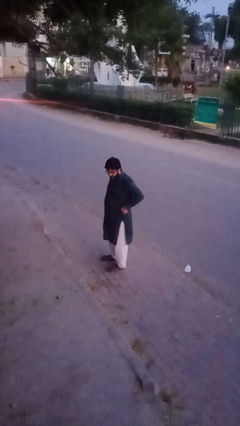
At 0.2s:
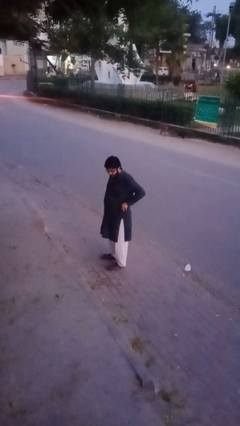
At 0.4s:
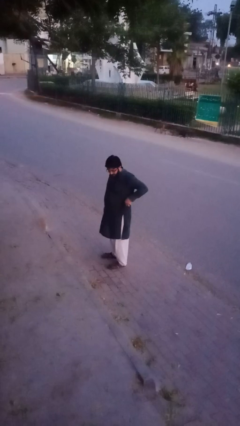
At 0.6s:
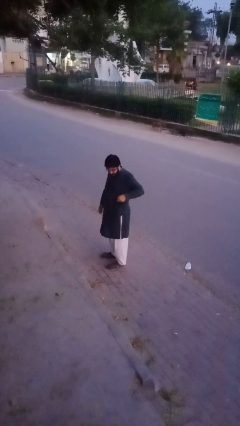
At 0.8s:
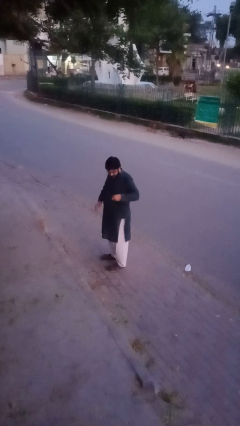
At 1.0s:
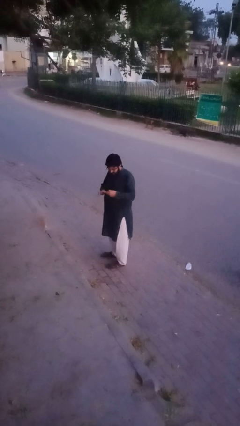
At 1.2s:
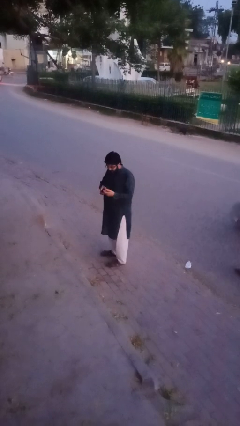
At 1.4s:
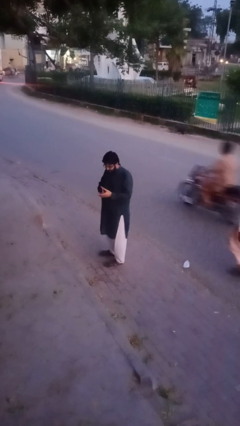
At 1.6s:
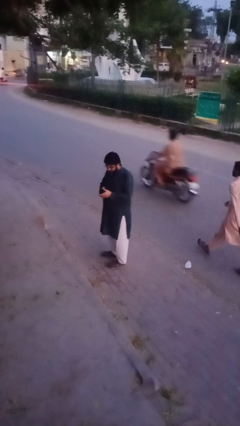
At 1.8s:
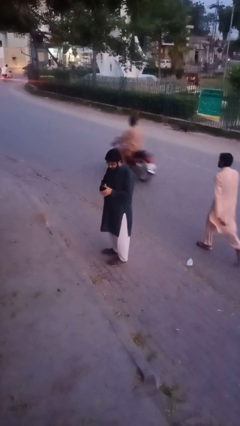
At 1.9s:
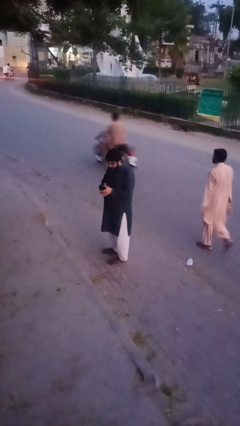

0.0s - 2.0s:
person takes phone from pocket

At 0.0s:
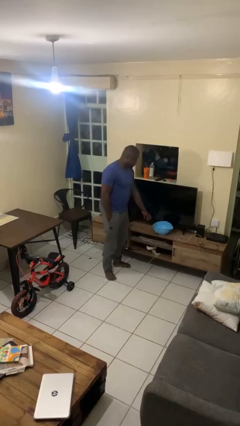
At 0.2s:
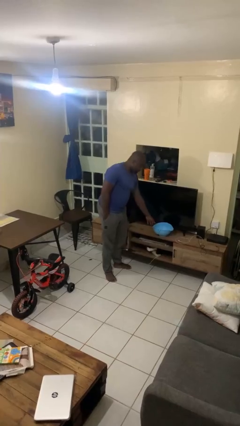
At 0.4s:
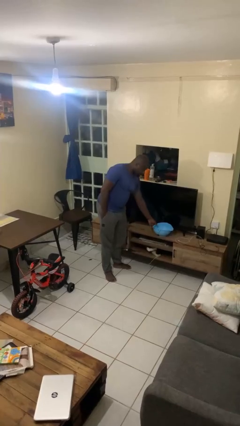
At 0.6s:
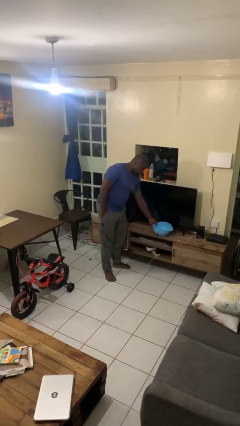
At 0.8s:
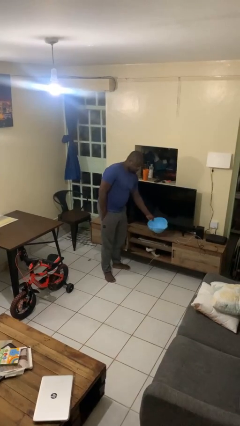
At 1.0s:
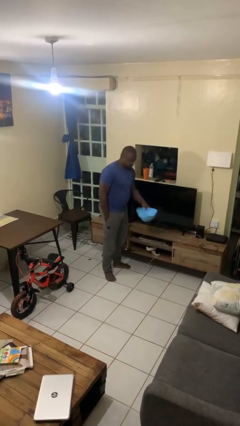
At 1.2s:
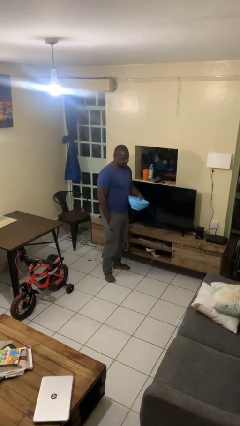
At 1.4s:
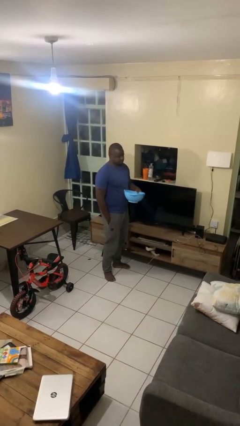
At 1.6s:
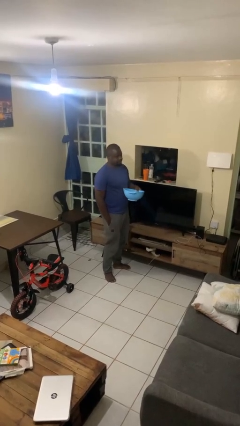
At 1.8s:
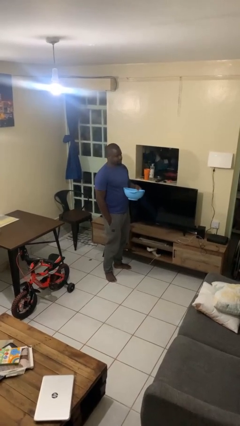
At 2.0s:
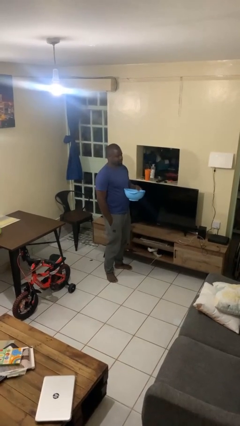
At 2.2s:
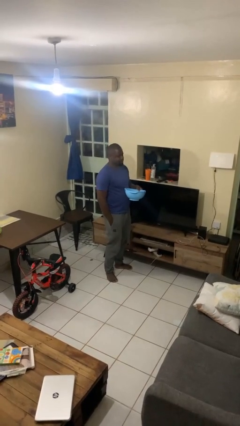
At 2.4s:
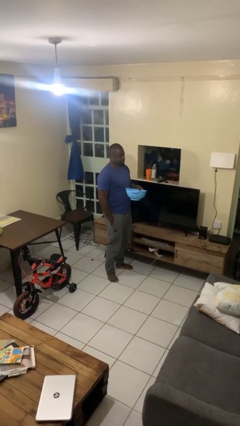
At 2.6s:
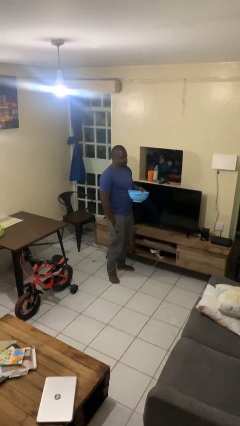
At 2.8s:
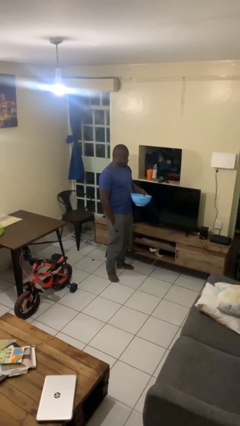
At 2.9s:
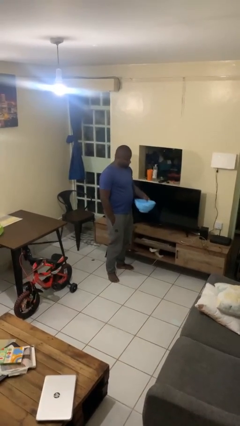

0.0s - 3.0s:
person picks up object from countertop

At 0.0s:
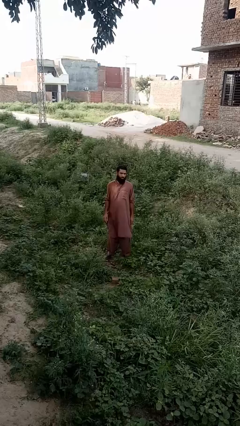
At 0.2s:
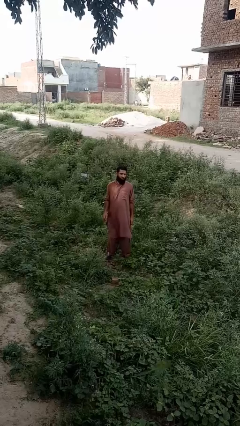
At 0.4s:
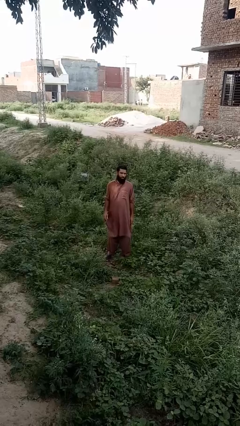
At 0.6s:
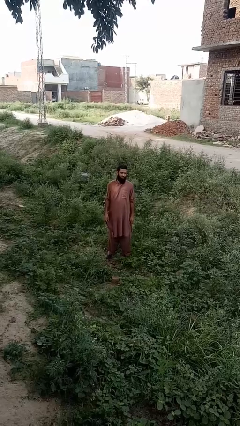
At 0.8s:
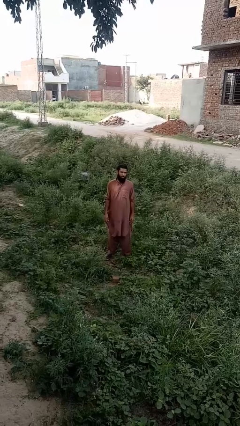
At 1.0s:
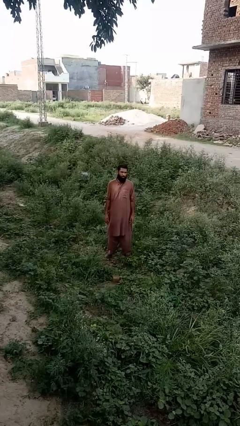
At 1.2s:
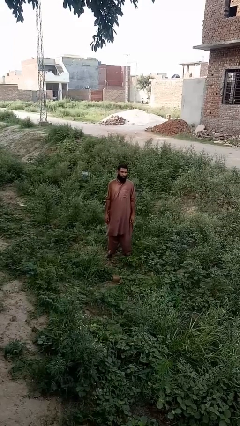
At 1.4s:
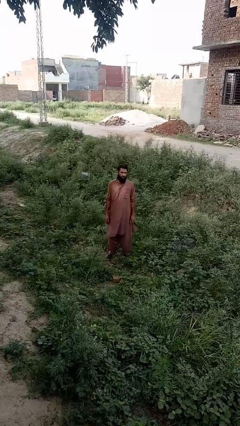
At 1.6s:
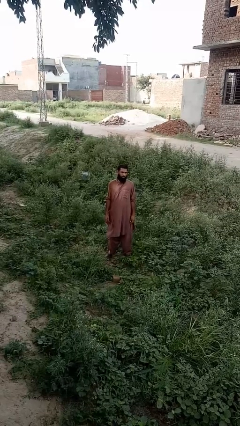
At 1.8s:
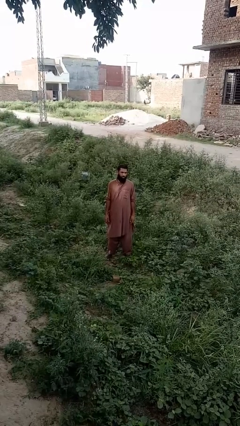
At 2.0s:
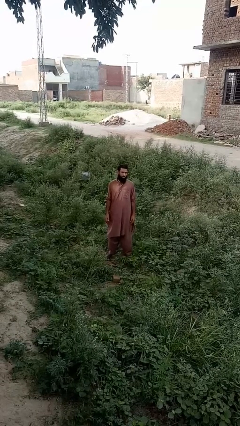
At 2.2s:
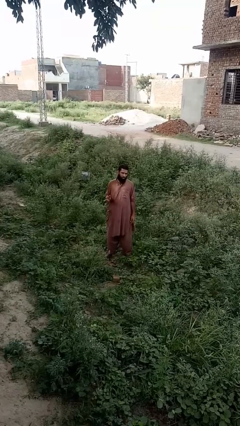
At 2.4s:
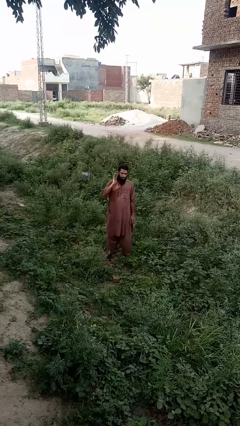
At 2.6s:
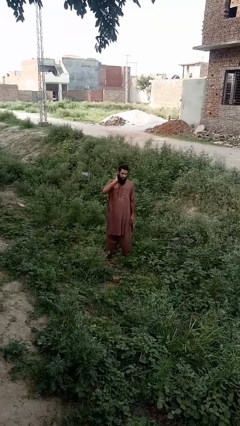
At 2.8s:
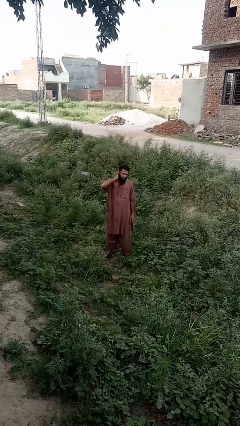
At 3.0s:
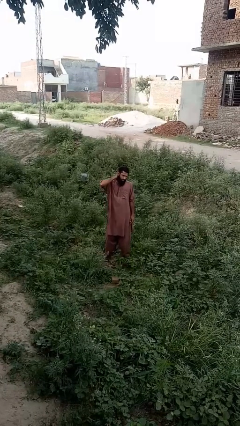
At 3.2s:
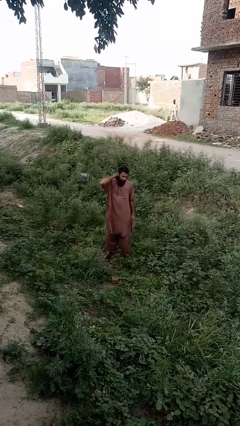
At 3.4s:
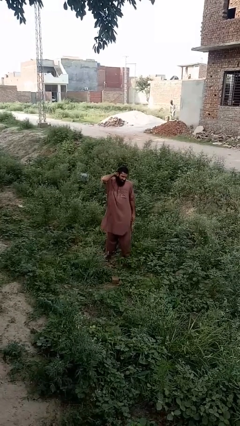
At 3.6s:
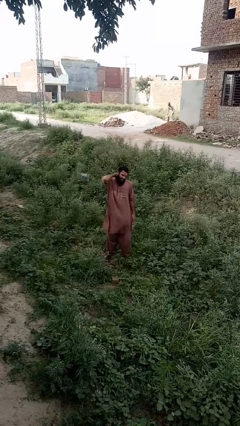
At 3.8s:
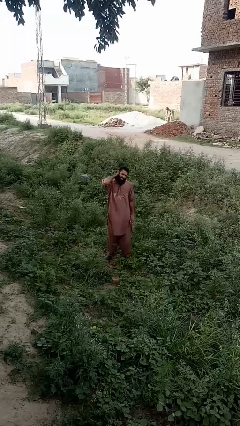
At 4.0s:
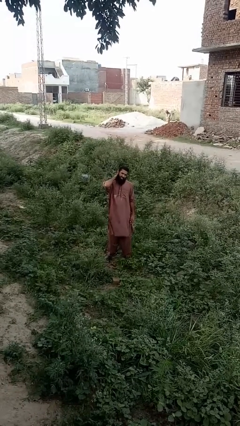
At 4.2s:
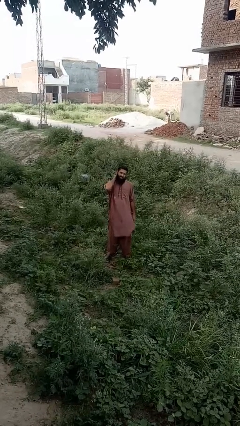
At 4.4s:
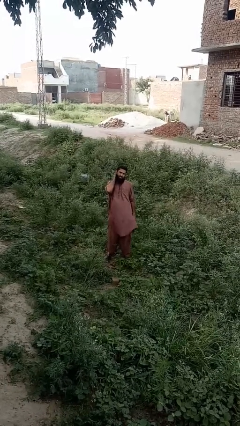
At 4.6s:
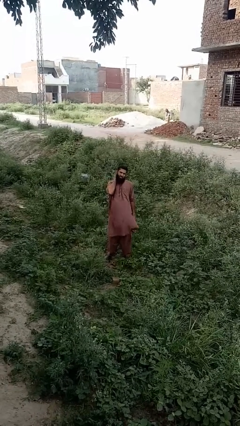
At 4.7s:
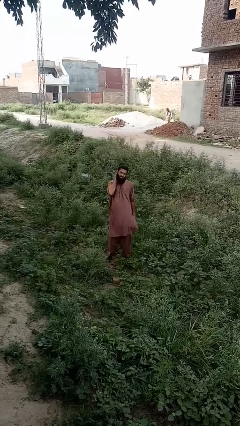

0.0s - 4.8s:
person rubs neck

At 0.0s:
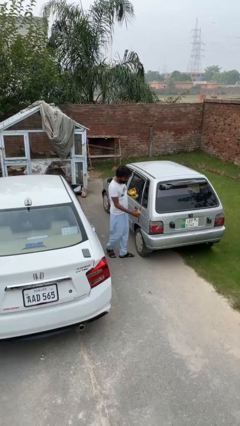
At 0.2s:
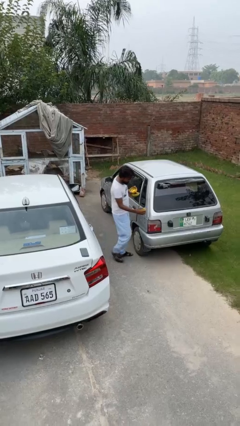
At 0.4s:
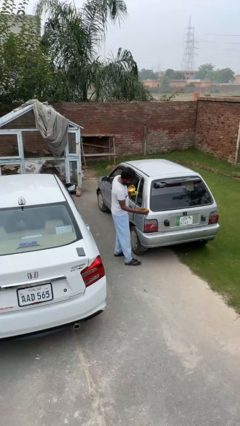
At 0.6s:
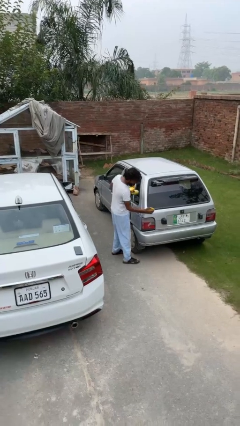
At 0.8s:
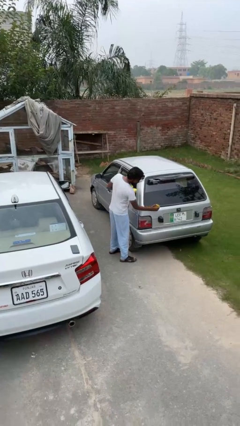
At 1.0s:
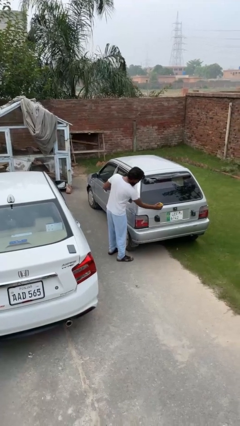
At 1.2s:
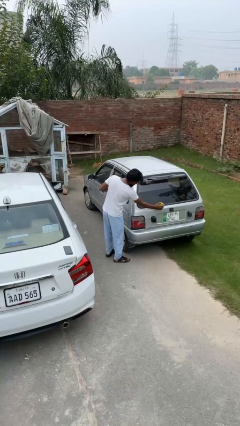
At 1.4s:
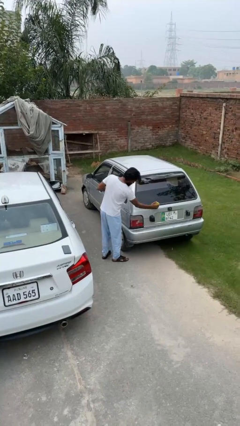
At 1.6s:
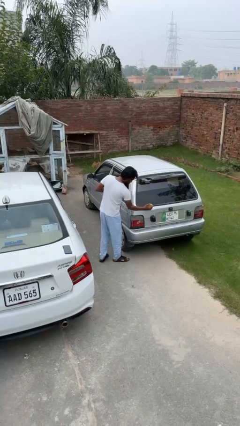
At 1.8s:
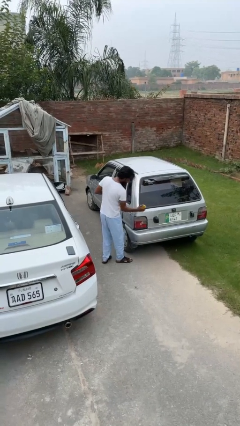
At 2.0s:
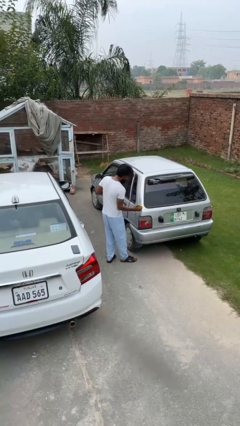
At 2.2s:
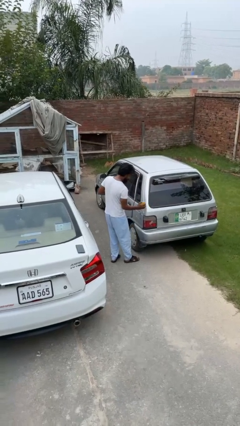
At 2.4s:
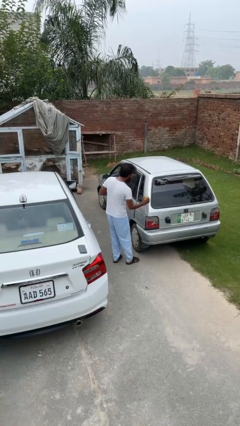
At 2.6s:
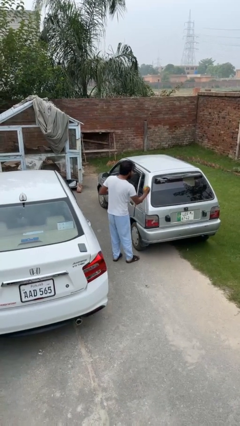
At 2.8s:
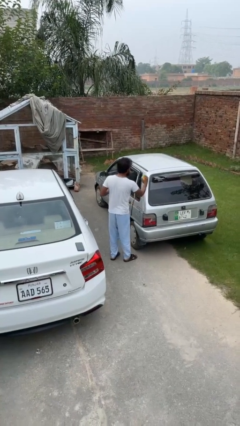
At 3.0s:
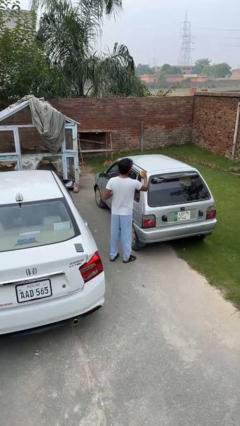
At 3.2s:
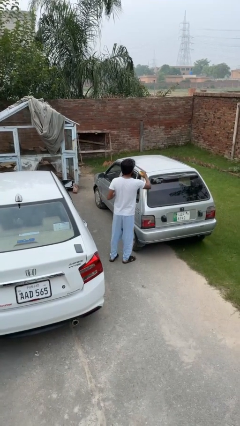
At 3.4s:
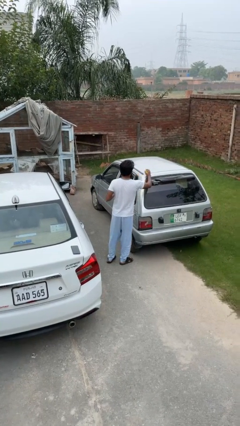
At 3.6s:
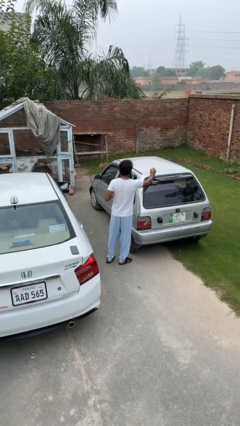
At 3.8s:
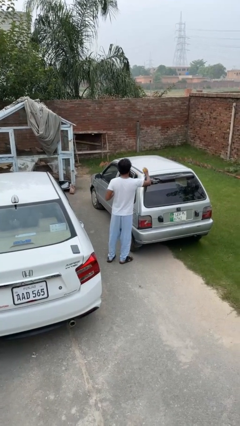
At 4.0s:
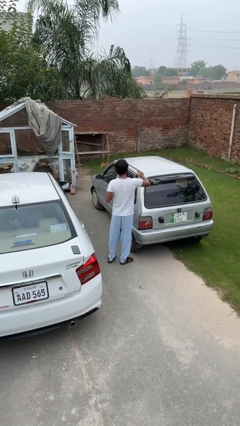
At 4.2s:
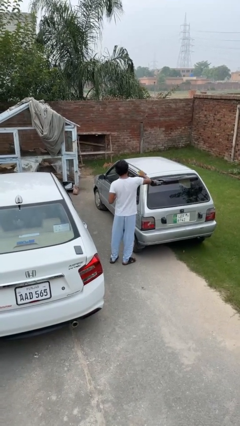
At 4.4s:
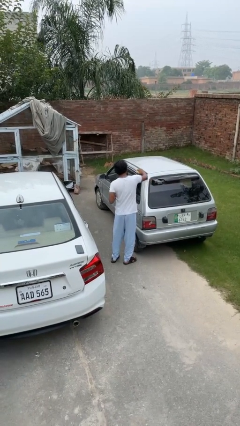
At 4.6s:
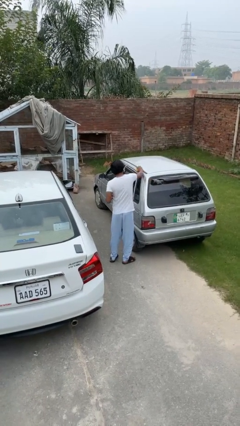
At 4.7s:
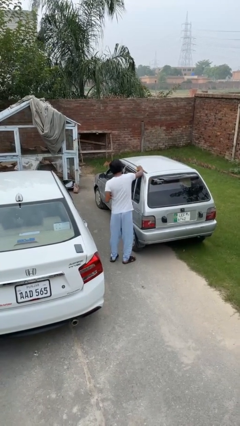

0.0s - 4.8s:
person polishes car with rag

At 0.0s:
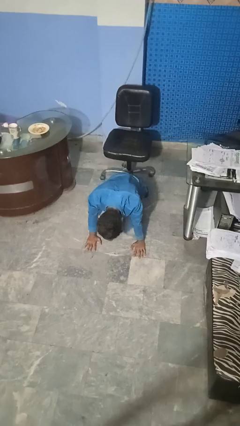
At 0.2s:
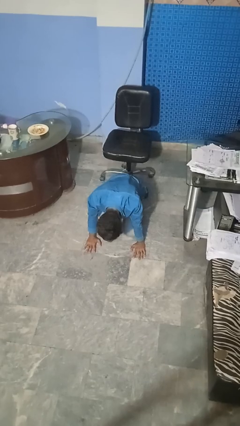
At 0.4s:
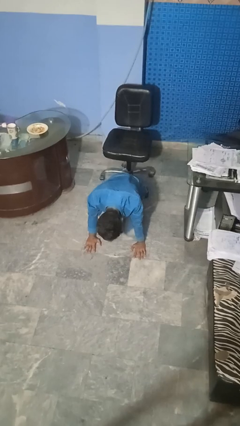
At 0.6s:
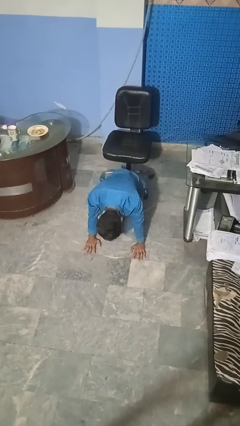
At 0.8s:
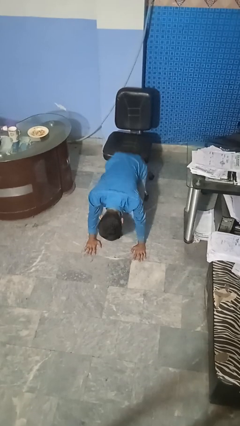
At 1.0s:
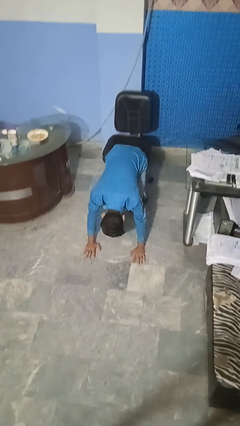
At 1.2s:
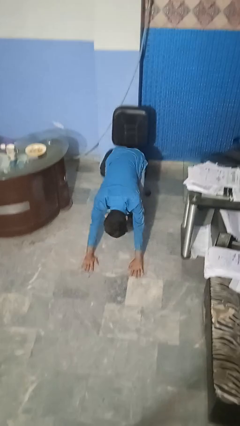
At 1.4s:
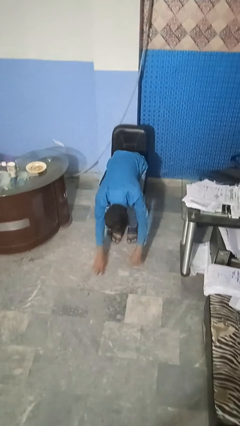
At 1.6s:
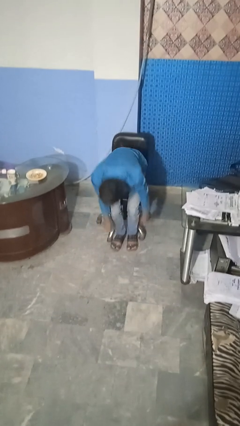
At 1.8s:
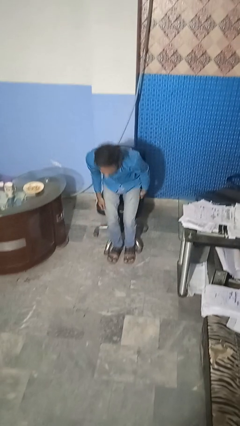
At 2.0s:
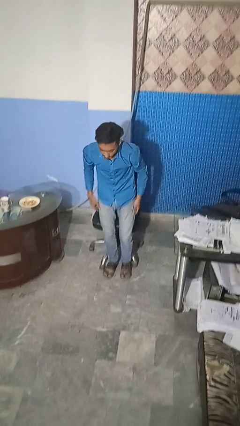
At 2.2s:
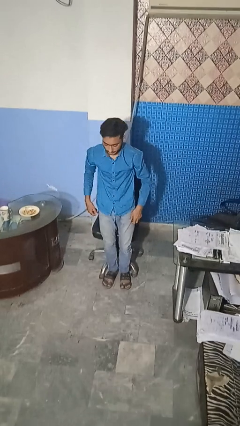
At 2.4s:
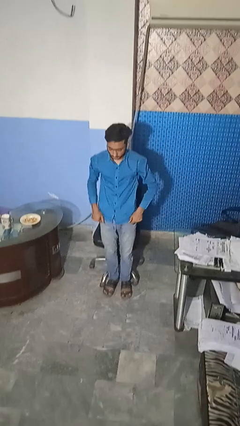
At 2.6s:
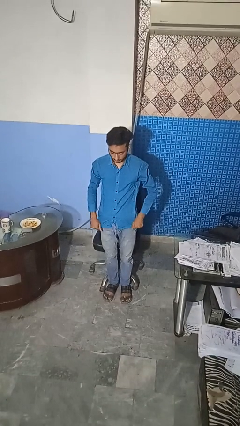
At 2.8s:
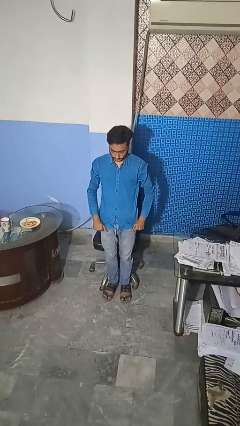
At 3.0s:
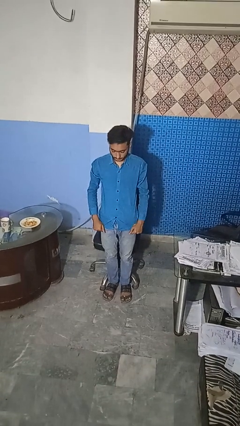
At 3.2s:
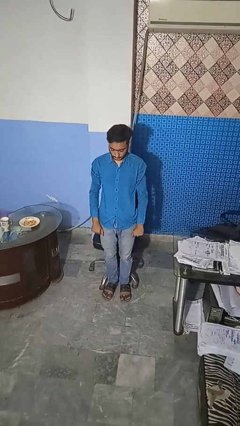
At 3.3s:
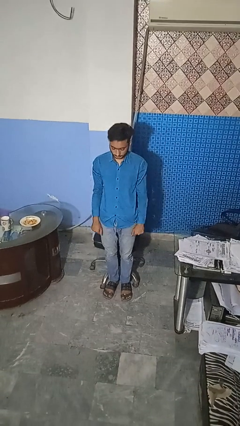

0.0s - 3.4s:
person stands up from floor
